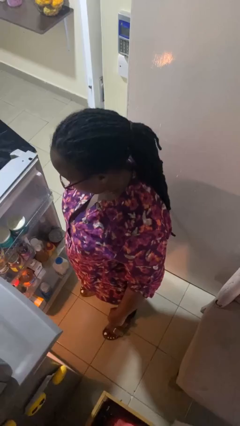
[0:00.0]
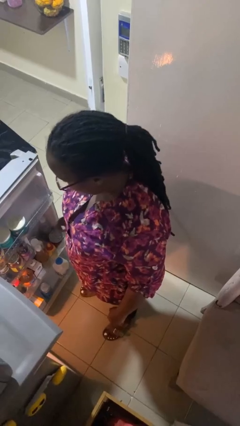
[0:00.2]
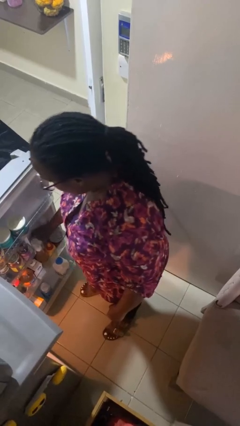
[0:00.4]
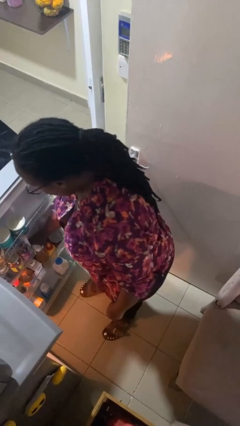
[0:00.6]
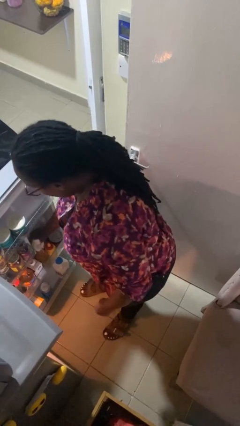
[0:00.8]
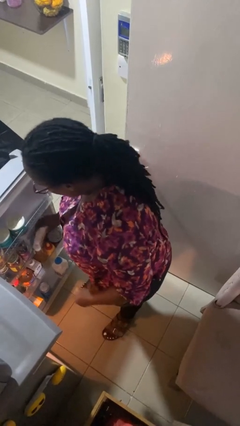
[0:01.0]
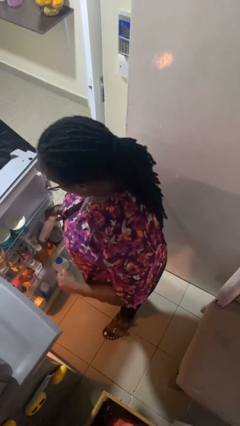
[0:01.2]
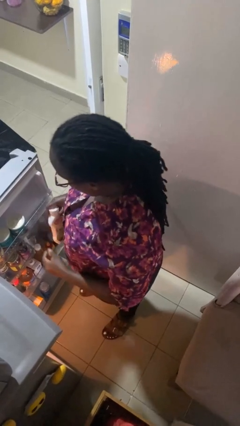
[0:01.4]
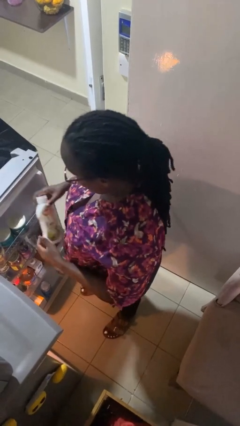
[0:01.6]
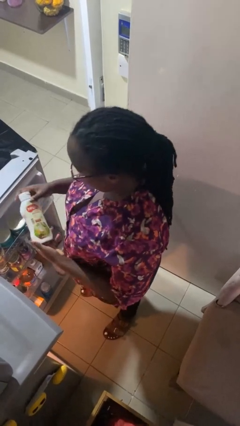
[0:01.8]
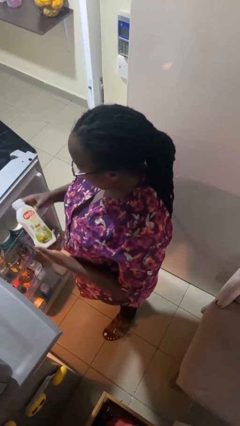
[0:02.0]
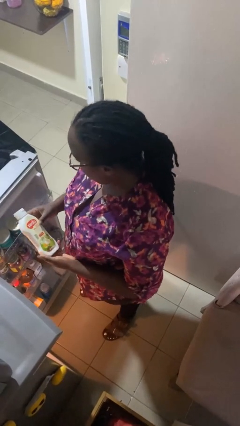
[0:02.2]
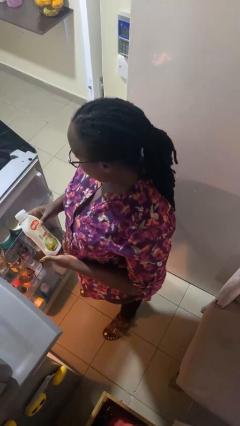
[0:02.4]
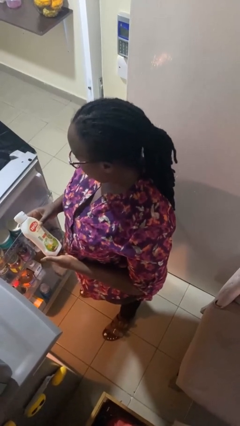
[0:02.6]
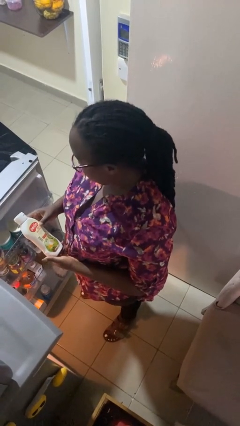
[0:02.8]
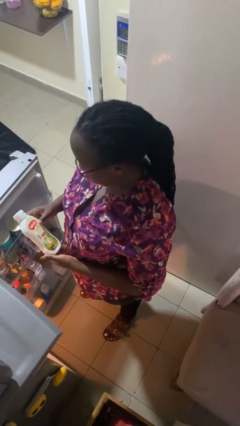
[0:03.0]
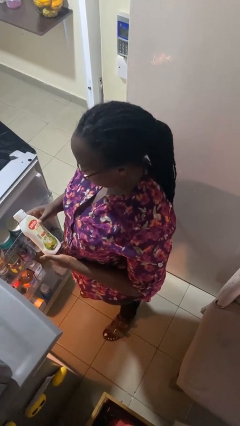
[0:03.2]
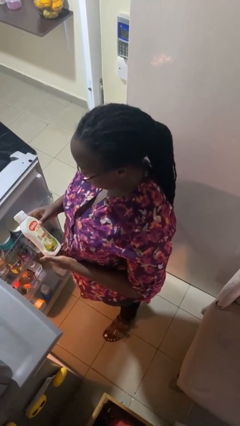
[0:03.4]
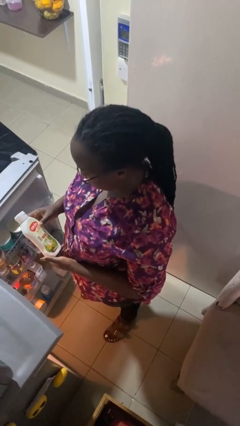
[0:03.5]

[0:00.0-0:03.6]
person takes object from refrigerator

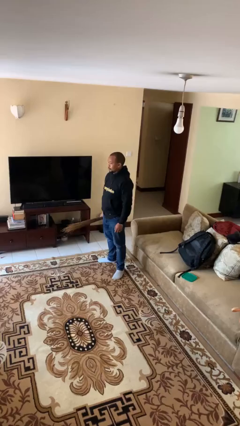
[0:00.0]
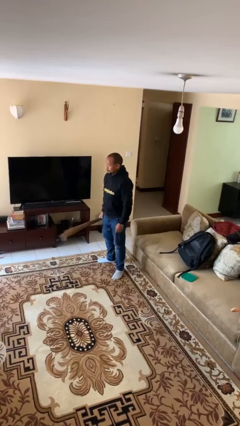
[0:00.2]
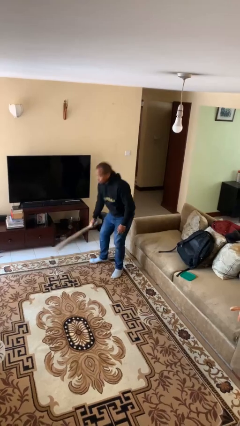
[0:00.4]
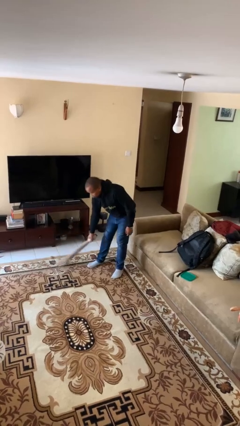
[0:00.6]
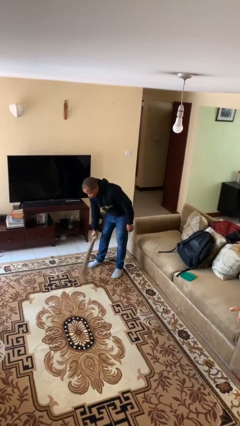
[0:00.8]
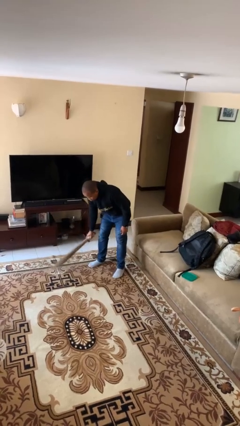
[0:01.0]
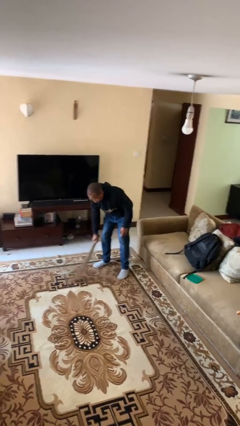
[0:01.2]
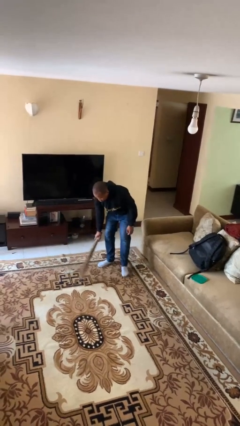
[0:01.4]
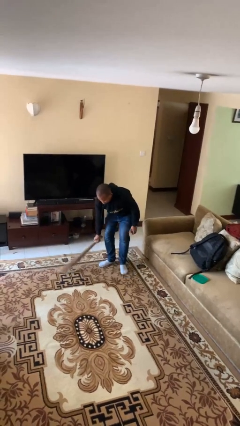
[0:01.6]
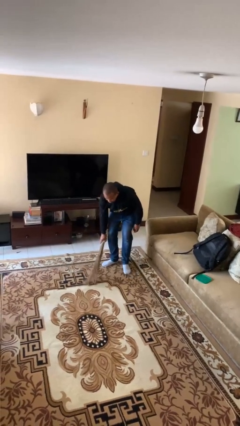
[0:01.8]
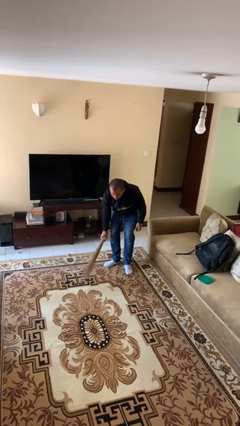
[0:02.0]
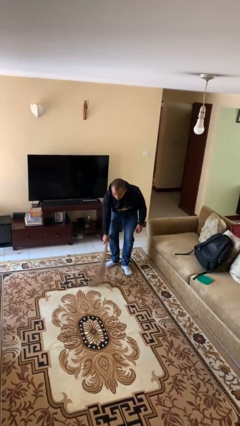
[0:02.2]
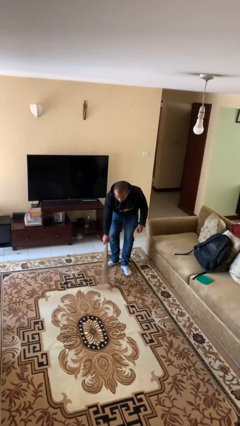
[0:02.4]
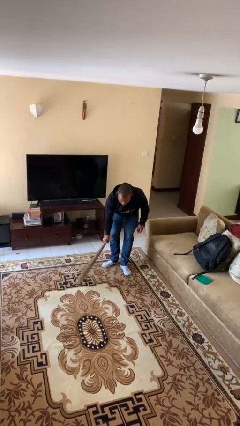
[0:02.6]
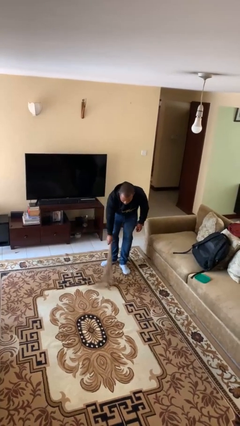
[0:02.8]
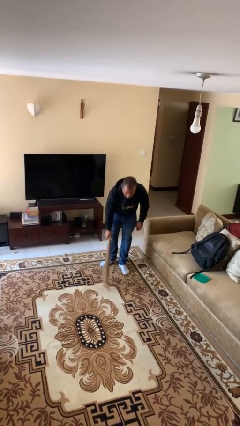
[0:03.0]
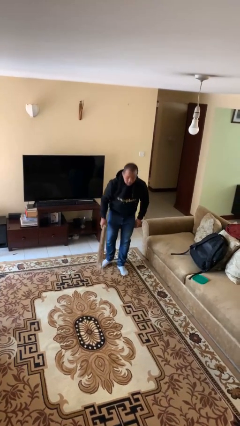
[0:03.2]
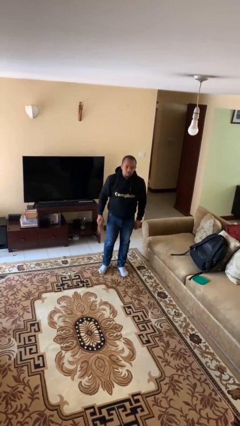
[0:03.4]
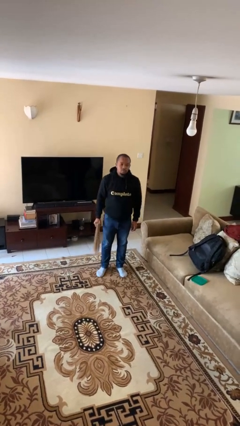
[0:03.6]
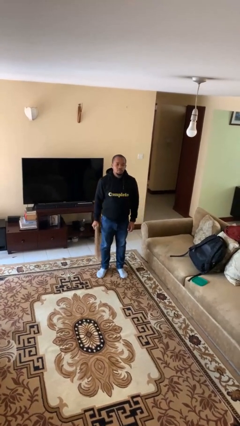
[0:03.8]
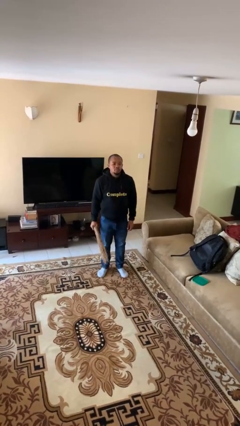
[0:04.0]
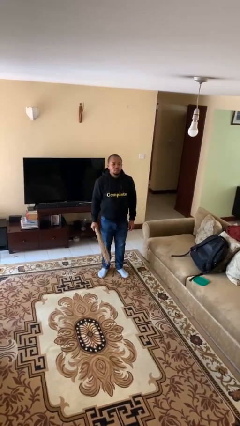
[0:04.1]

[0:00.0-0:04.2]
person sweeps floor

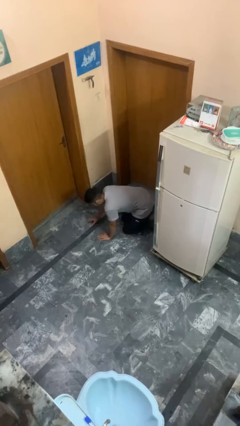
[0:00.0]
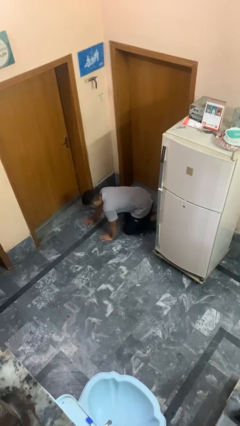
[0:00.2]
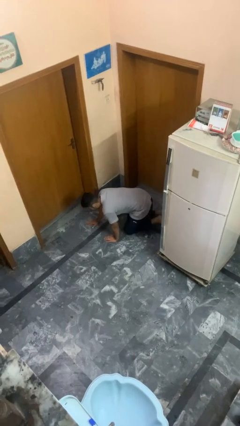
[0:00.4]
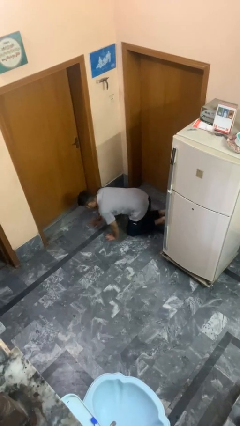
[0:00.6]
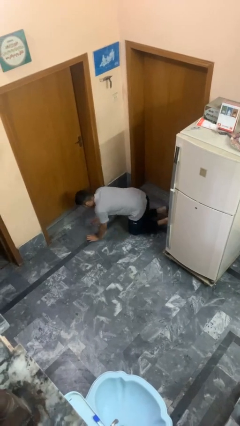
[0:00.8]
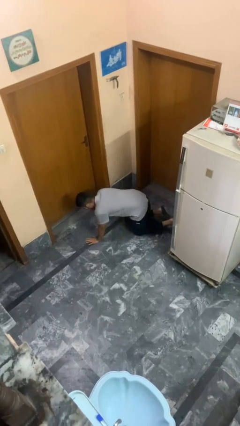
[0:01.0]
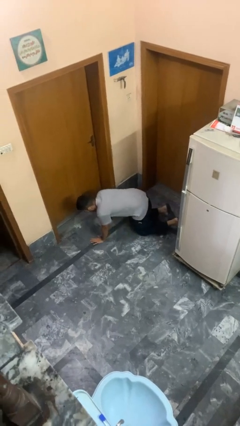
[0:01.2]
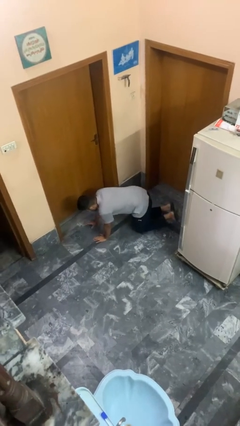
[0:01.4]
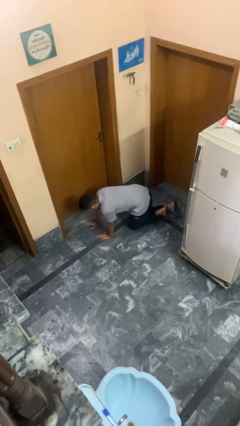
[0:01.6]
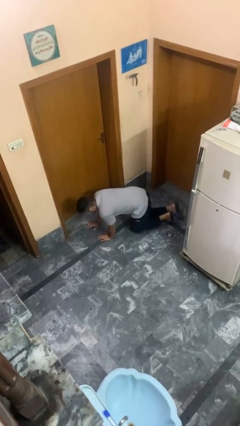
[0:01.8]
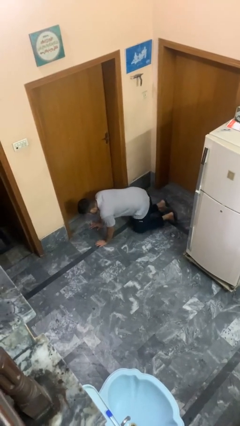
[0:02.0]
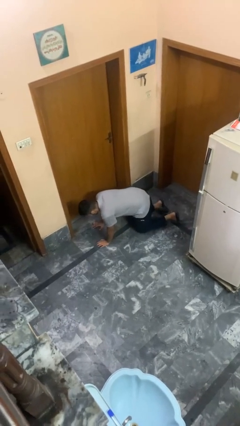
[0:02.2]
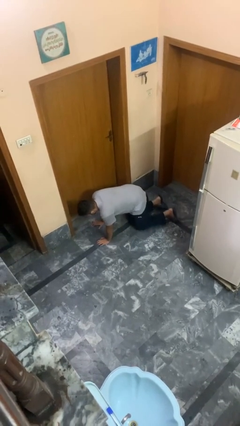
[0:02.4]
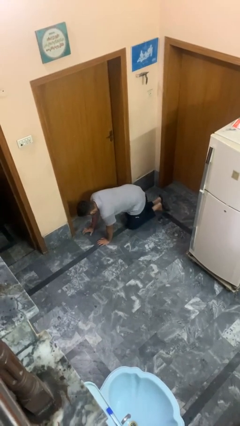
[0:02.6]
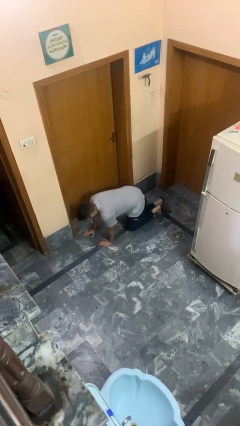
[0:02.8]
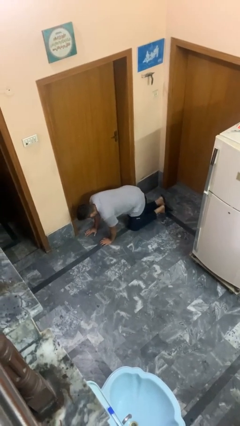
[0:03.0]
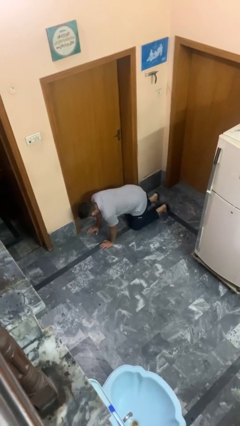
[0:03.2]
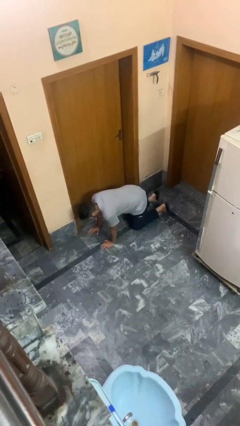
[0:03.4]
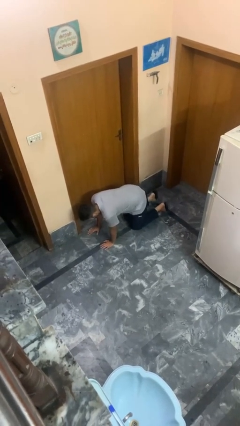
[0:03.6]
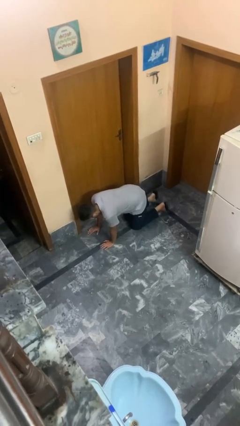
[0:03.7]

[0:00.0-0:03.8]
person crawls

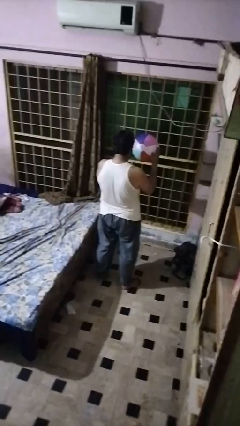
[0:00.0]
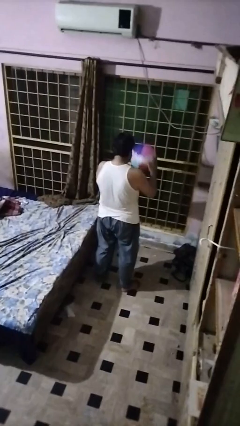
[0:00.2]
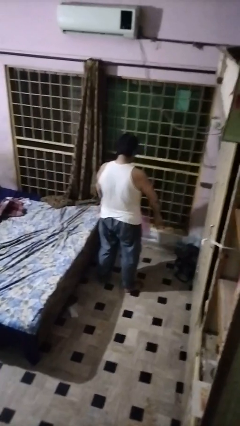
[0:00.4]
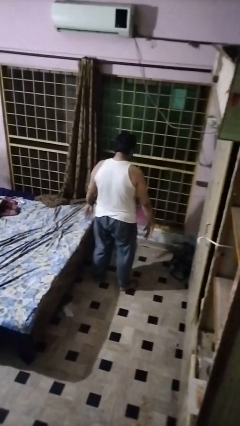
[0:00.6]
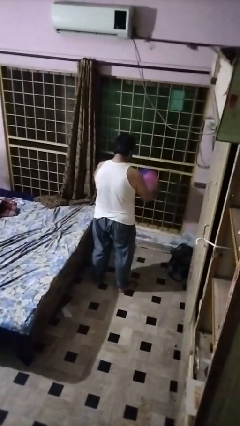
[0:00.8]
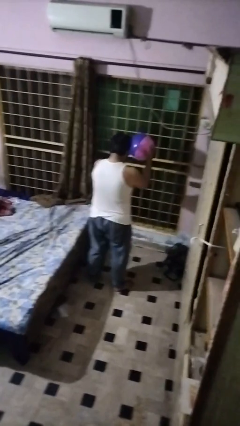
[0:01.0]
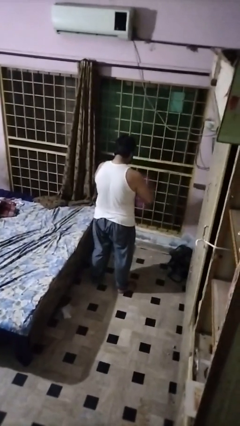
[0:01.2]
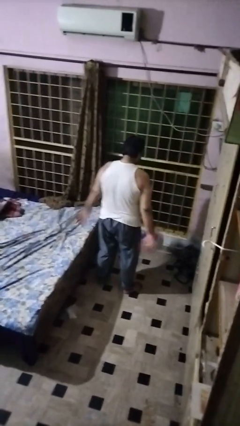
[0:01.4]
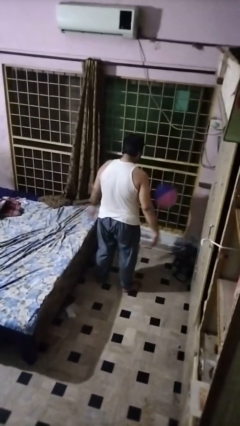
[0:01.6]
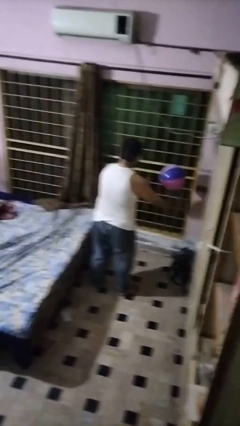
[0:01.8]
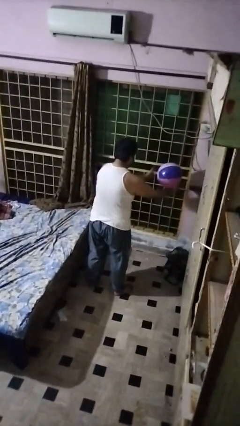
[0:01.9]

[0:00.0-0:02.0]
person bounces ball on floor

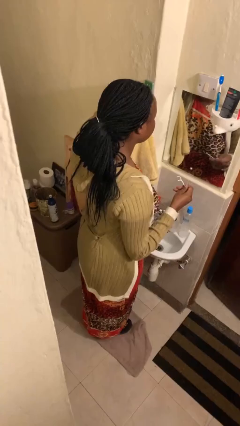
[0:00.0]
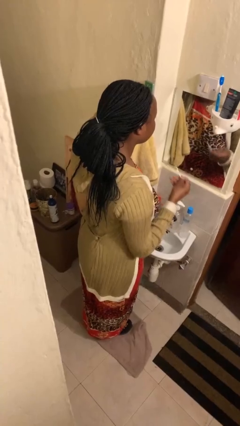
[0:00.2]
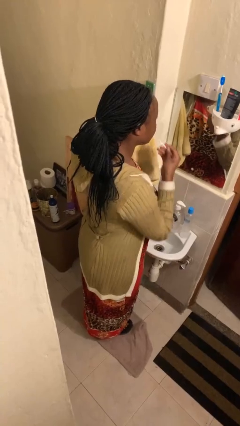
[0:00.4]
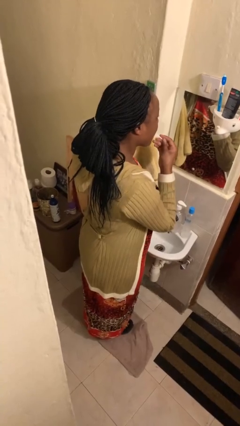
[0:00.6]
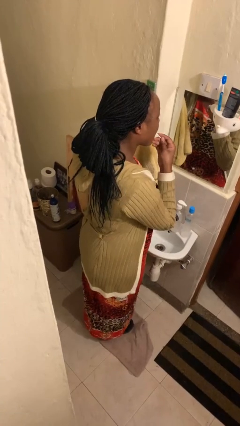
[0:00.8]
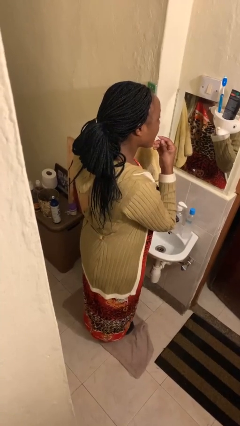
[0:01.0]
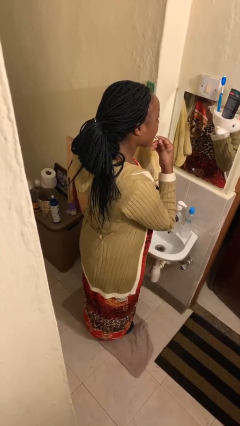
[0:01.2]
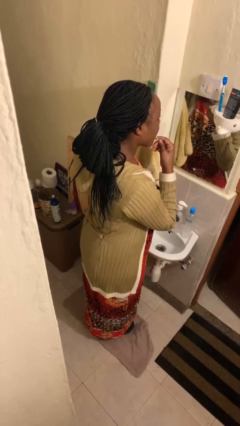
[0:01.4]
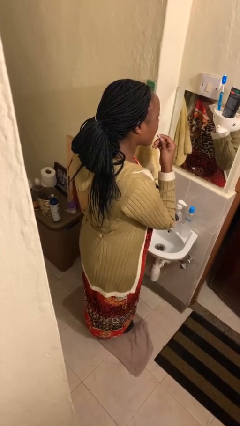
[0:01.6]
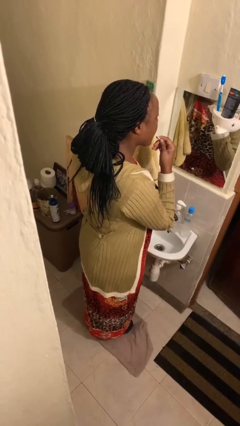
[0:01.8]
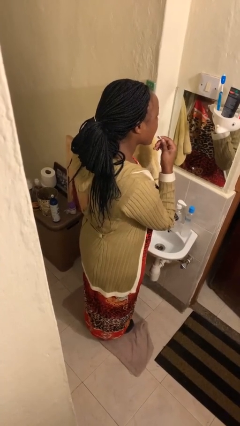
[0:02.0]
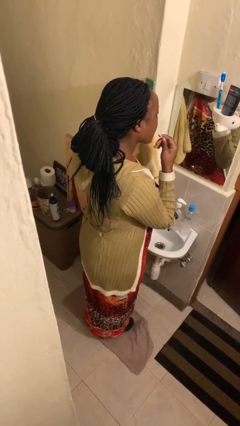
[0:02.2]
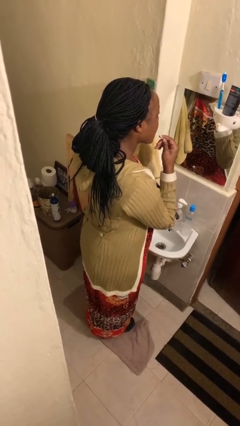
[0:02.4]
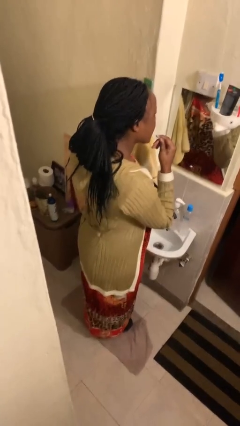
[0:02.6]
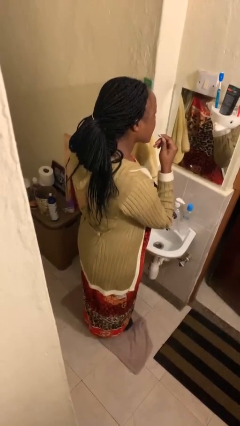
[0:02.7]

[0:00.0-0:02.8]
person flosses

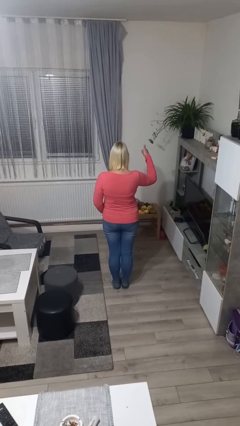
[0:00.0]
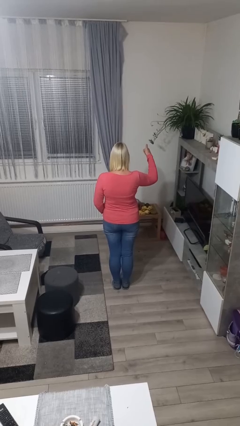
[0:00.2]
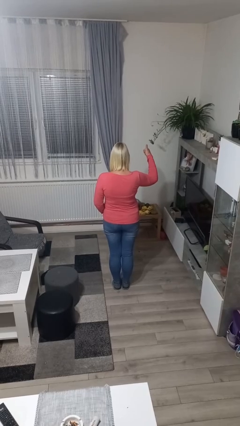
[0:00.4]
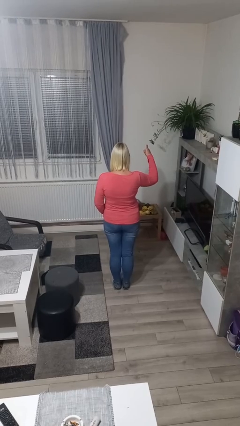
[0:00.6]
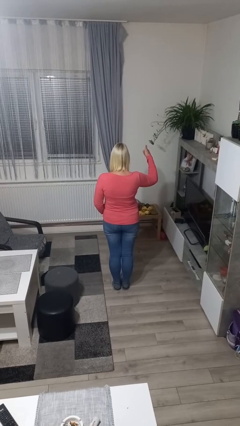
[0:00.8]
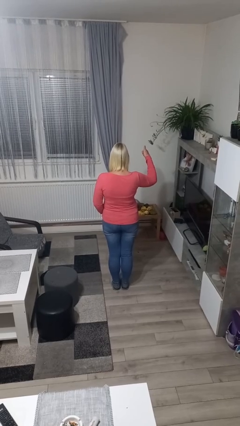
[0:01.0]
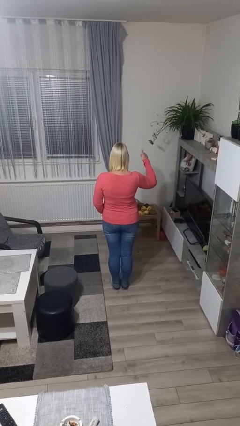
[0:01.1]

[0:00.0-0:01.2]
person gestures number one

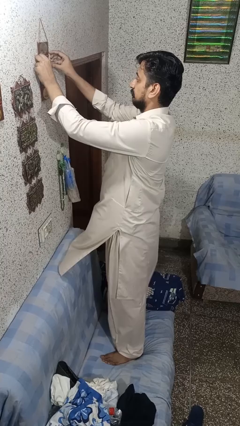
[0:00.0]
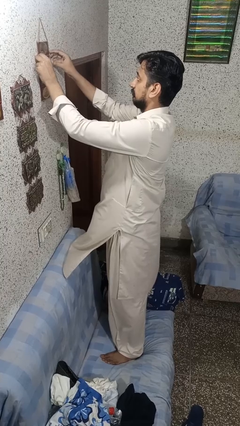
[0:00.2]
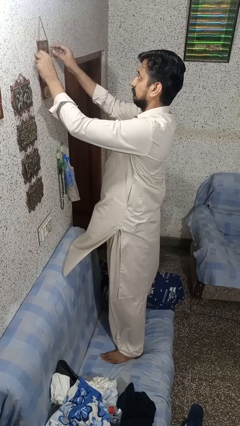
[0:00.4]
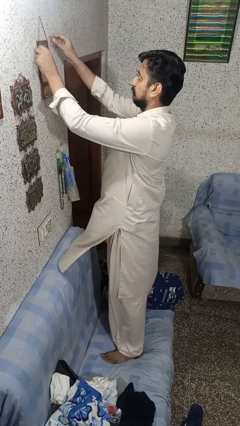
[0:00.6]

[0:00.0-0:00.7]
person takes down picture frame
